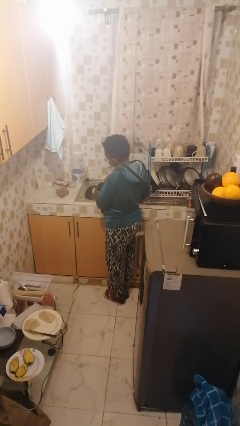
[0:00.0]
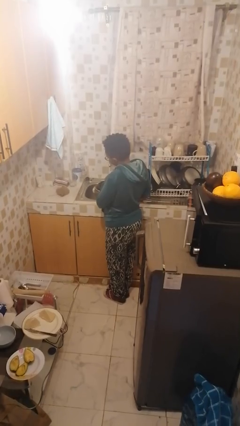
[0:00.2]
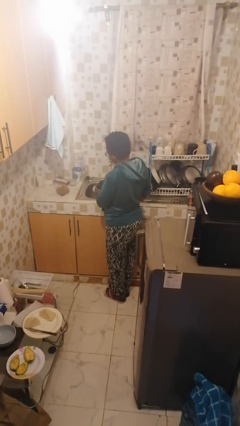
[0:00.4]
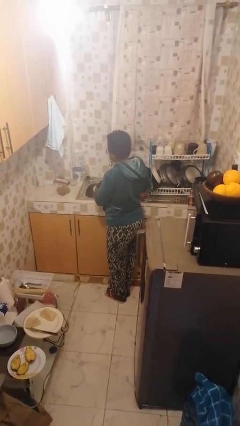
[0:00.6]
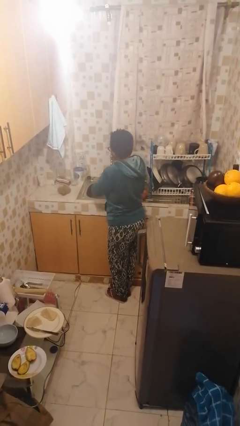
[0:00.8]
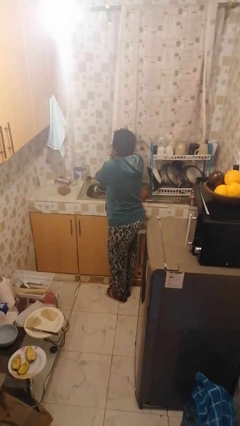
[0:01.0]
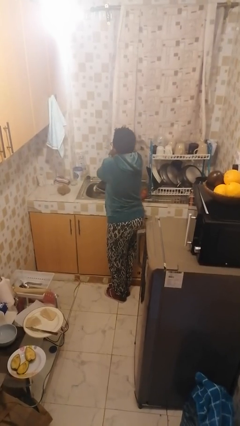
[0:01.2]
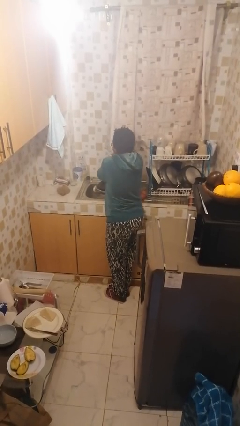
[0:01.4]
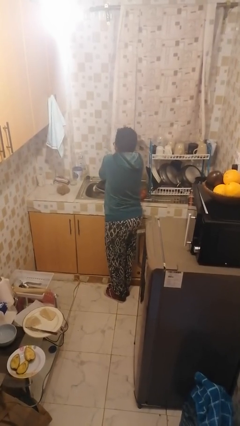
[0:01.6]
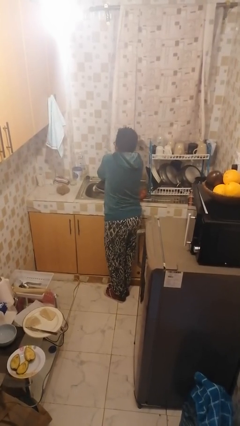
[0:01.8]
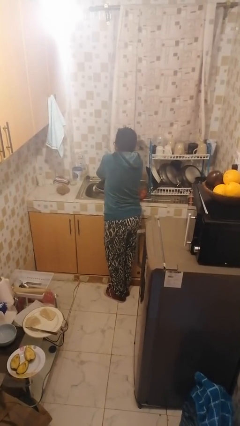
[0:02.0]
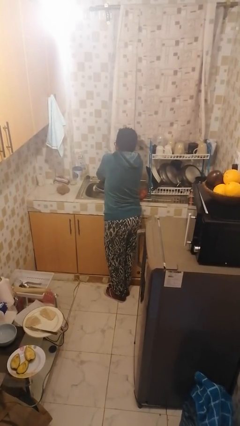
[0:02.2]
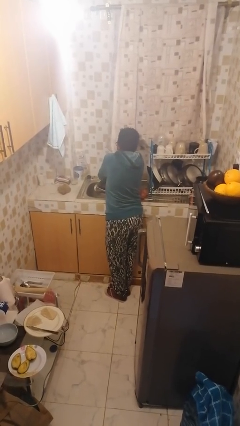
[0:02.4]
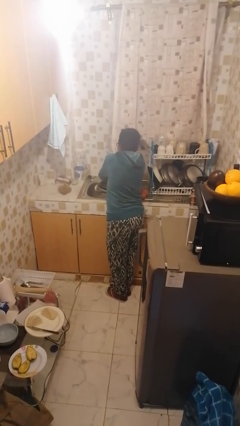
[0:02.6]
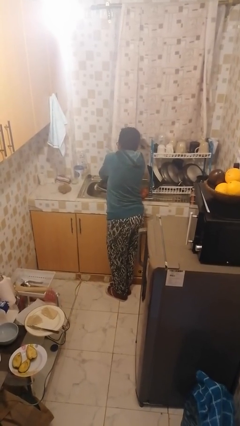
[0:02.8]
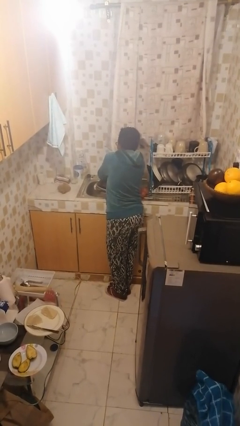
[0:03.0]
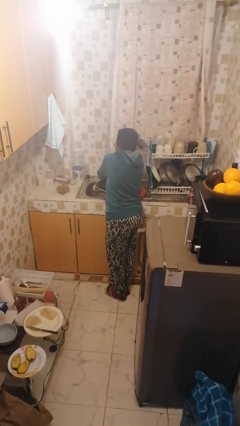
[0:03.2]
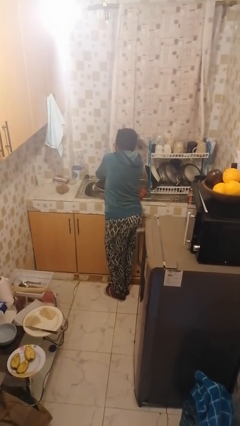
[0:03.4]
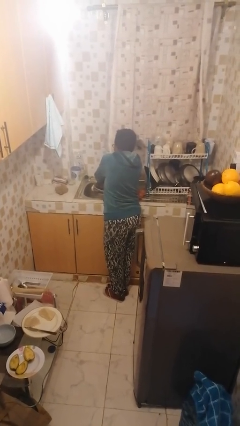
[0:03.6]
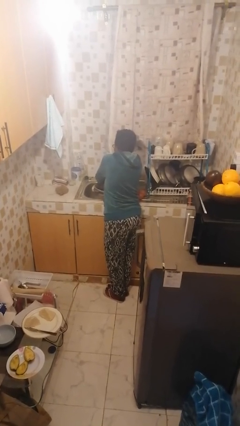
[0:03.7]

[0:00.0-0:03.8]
person washes hands

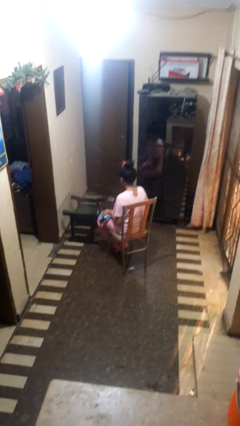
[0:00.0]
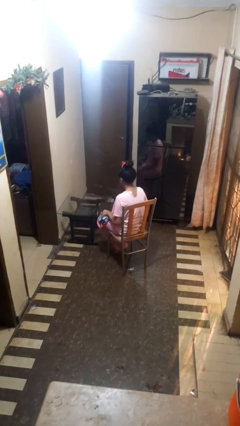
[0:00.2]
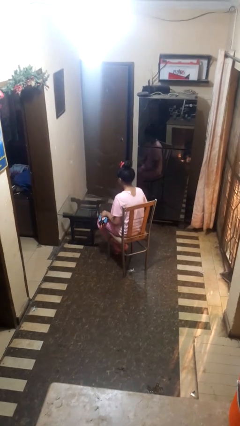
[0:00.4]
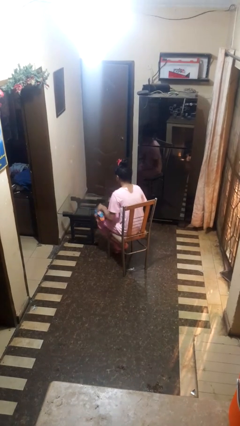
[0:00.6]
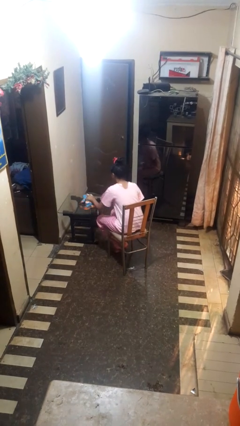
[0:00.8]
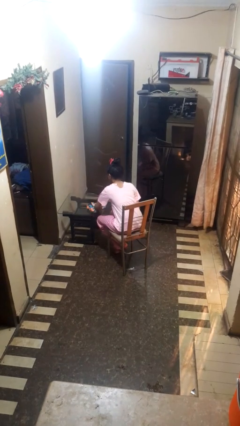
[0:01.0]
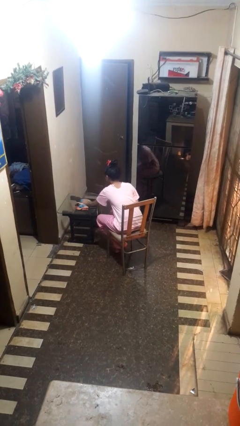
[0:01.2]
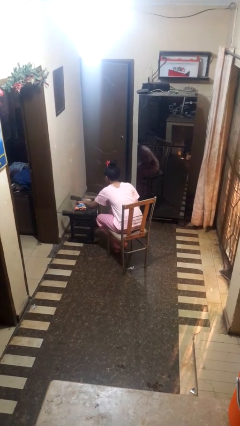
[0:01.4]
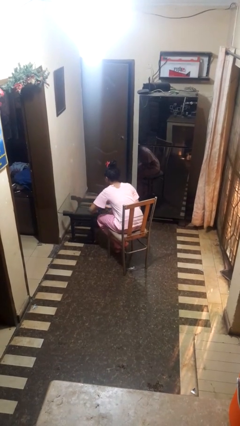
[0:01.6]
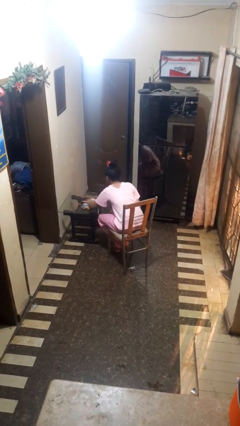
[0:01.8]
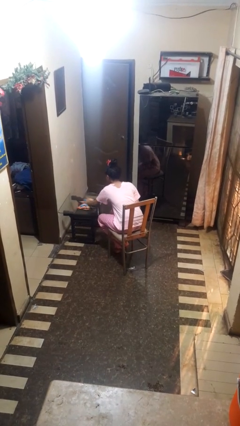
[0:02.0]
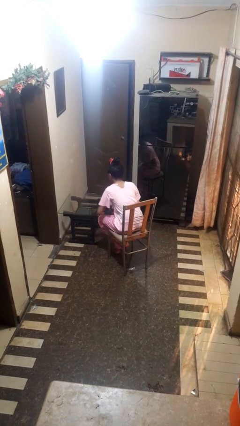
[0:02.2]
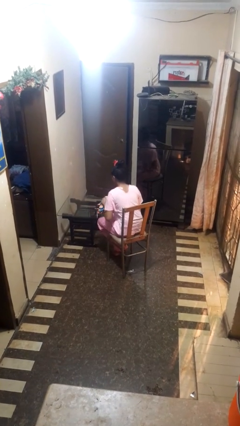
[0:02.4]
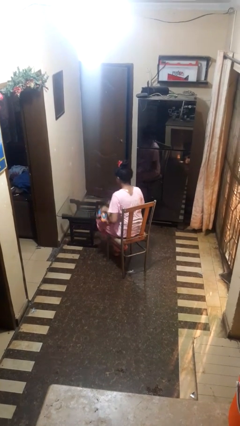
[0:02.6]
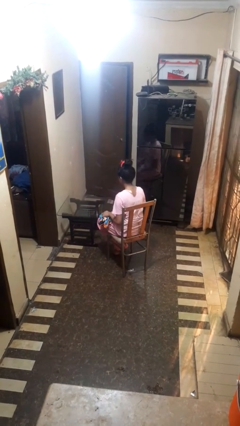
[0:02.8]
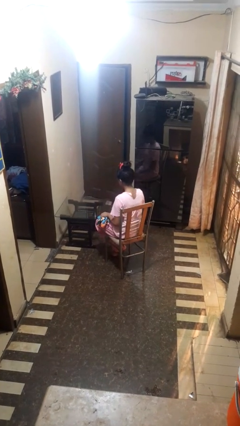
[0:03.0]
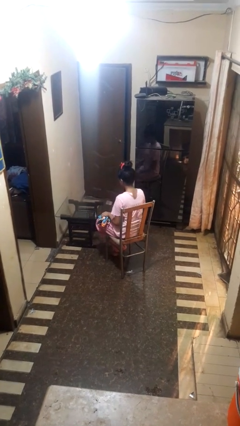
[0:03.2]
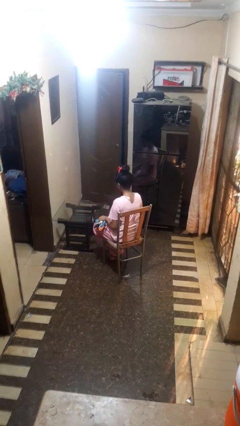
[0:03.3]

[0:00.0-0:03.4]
person cleans table with rag

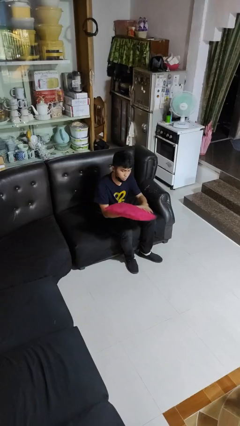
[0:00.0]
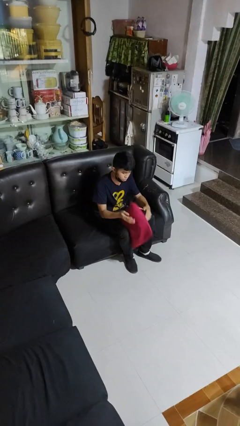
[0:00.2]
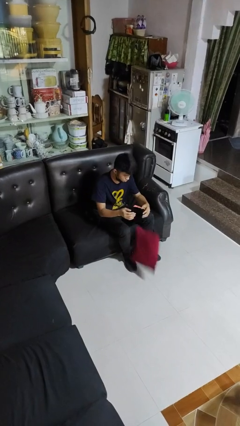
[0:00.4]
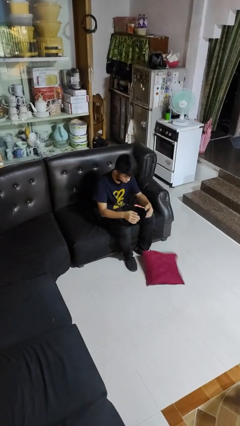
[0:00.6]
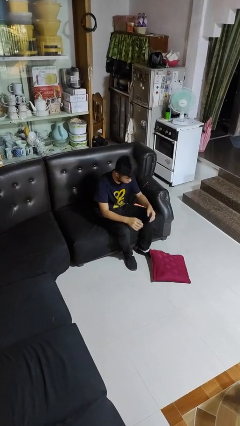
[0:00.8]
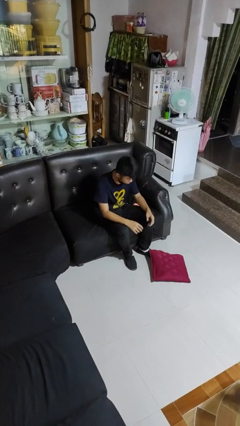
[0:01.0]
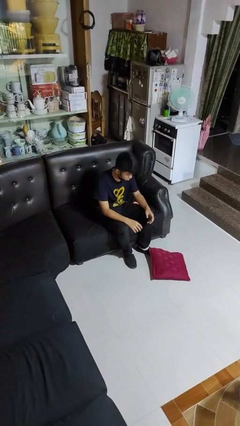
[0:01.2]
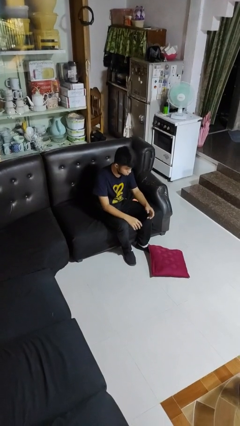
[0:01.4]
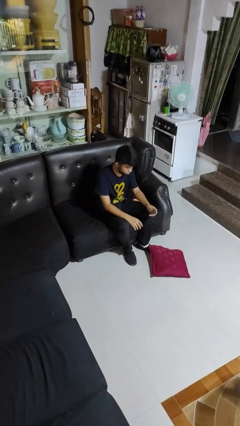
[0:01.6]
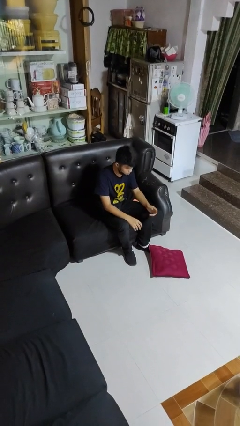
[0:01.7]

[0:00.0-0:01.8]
person drops object

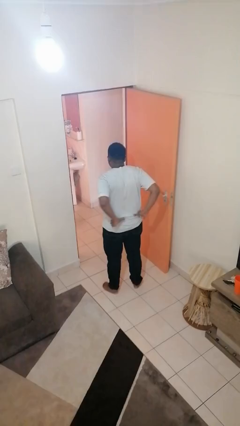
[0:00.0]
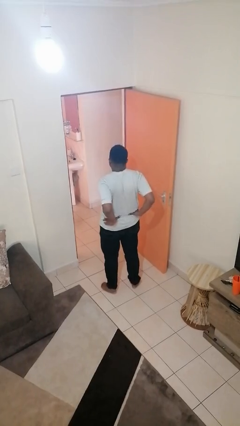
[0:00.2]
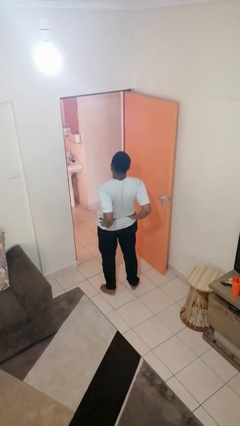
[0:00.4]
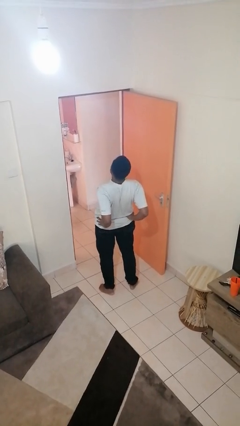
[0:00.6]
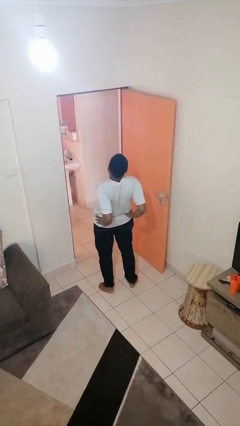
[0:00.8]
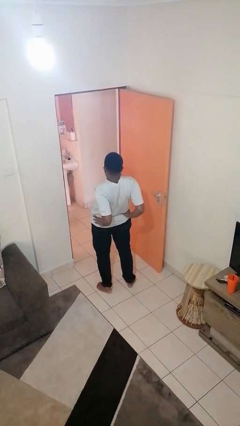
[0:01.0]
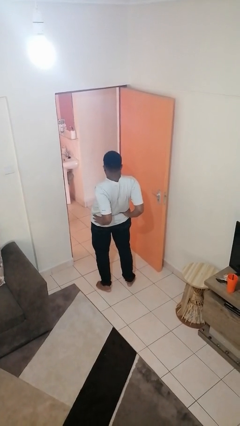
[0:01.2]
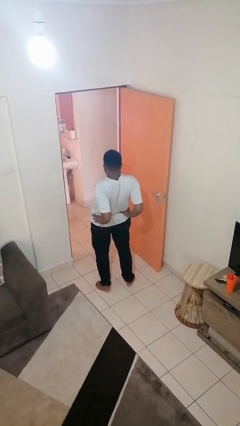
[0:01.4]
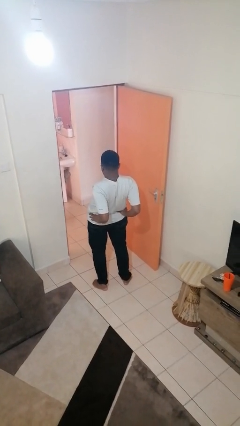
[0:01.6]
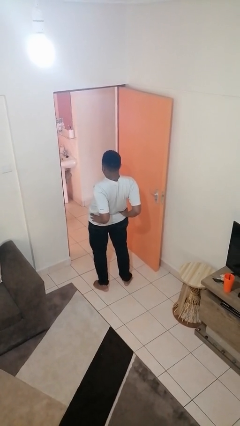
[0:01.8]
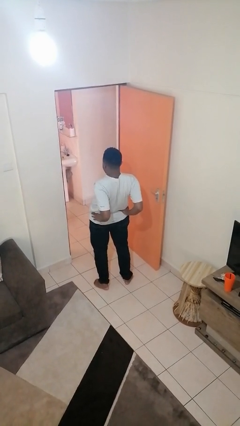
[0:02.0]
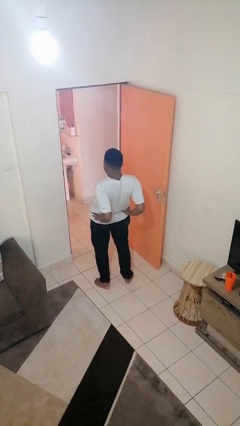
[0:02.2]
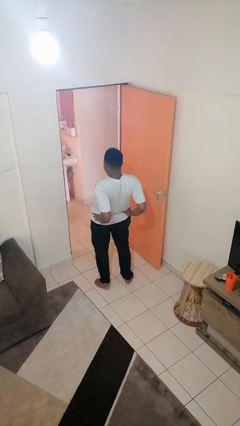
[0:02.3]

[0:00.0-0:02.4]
person stretches back

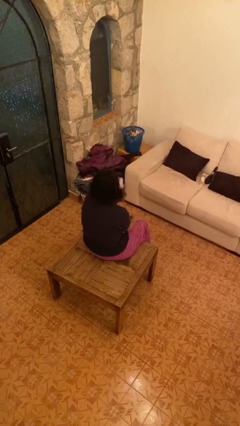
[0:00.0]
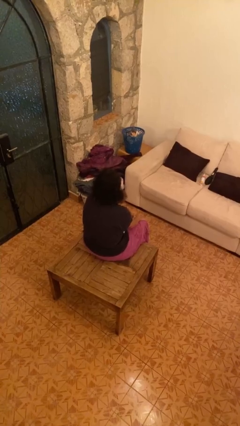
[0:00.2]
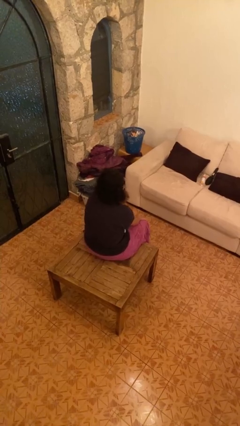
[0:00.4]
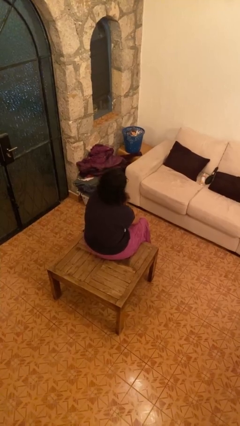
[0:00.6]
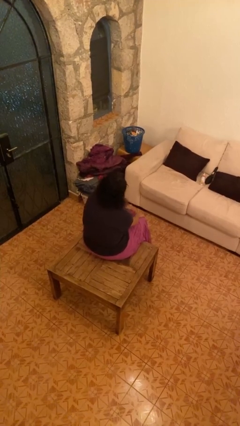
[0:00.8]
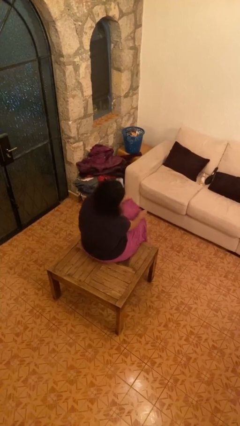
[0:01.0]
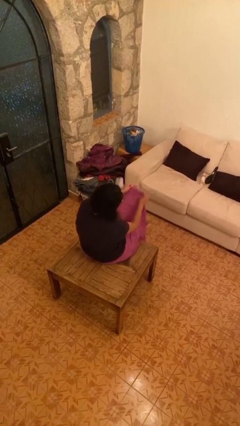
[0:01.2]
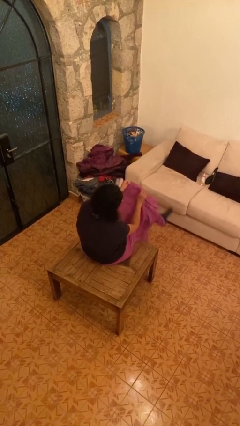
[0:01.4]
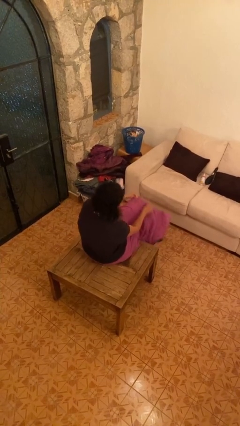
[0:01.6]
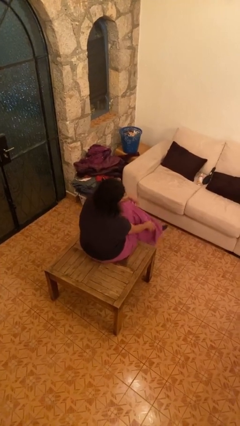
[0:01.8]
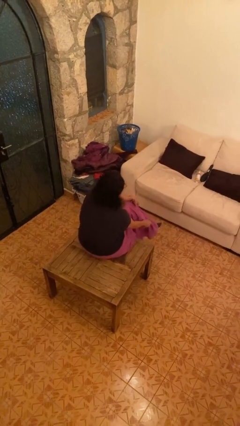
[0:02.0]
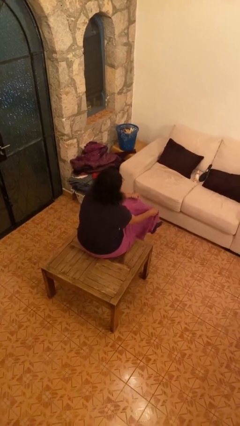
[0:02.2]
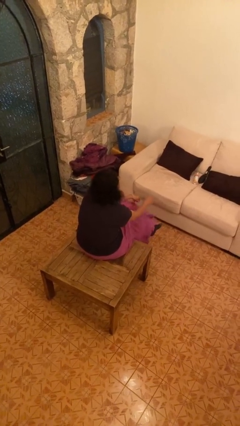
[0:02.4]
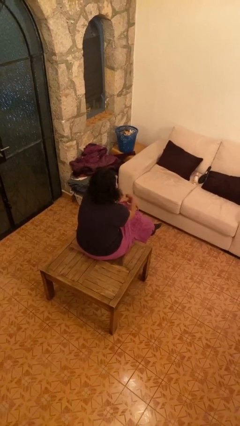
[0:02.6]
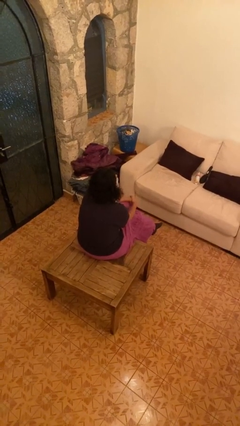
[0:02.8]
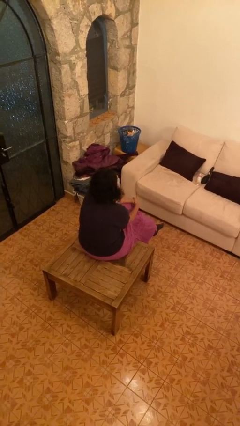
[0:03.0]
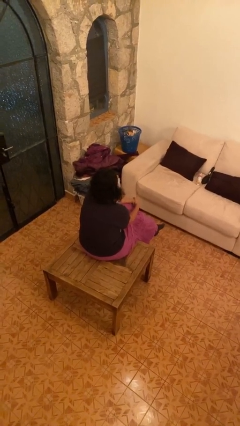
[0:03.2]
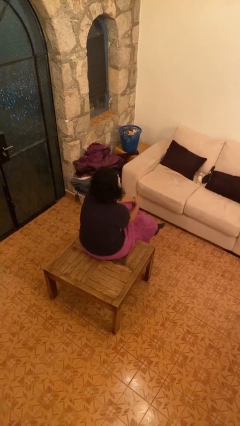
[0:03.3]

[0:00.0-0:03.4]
person crosses legs

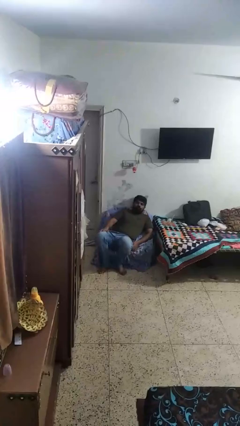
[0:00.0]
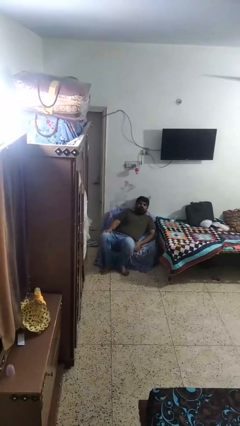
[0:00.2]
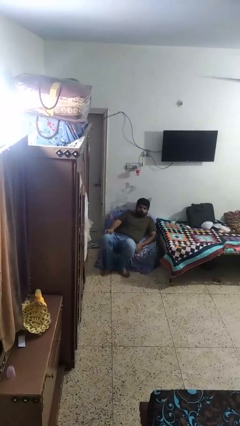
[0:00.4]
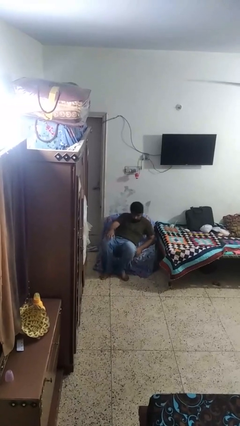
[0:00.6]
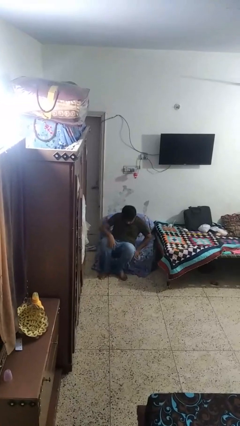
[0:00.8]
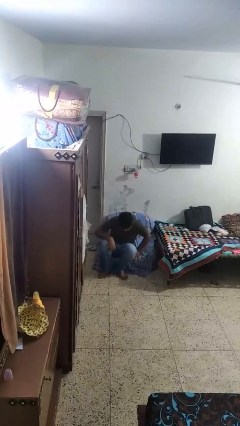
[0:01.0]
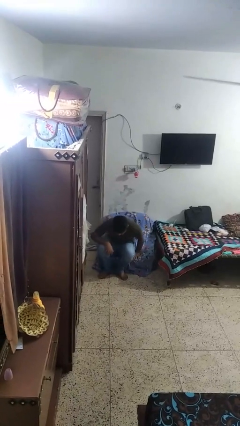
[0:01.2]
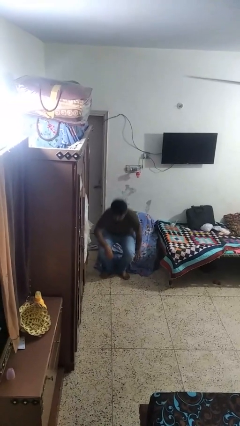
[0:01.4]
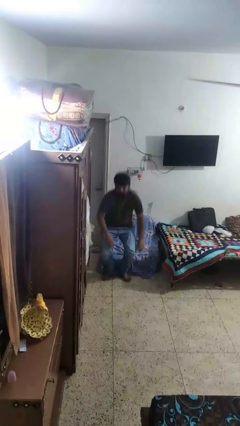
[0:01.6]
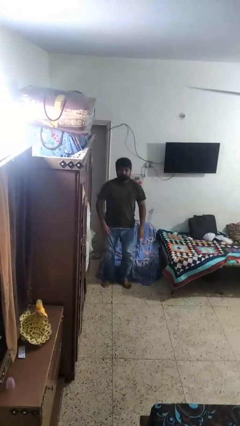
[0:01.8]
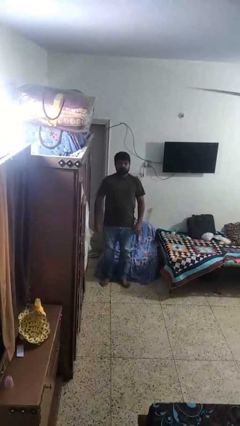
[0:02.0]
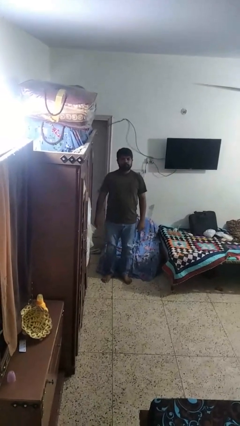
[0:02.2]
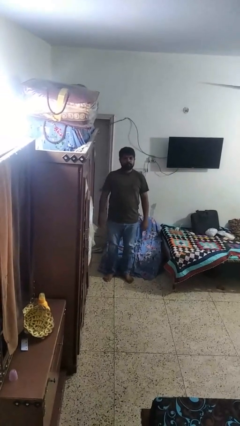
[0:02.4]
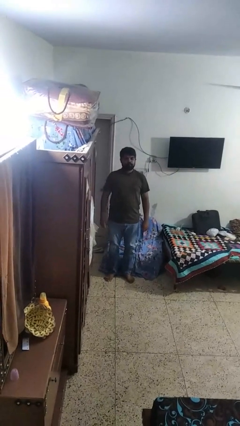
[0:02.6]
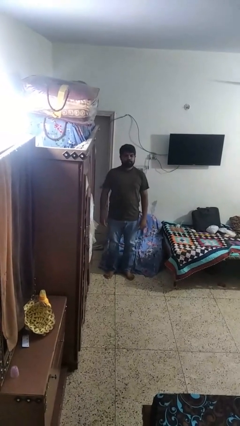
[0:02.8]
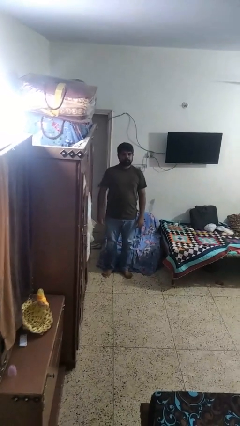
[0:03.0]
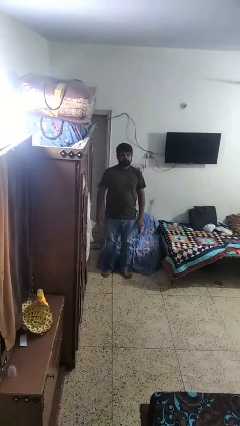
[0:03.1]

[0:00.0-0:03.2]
person stands up
